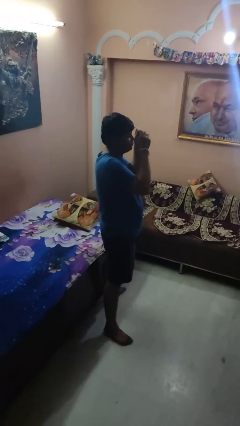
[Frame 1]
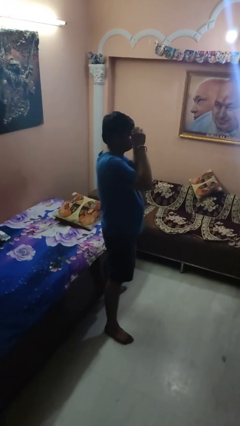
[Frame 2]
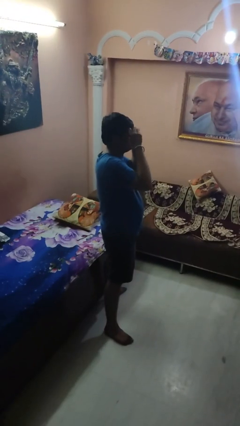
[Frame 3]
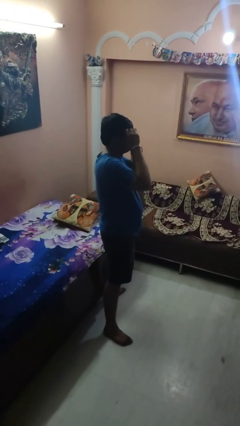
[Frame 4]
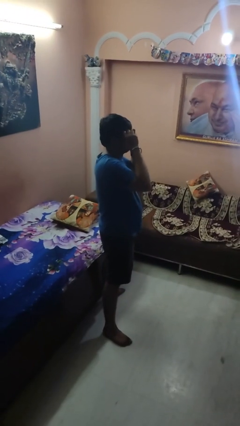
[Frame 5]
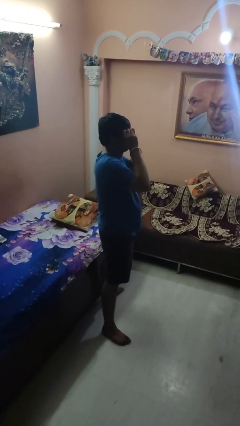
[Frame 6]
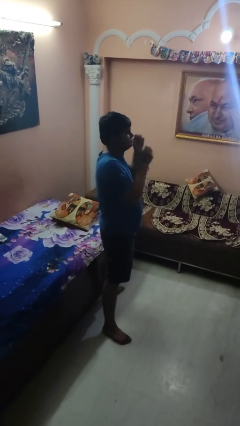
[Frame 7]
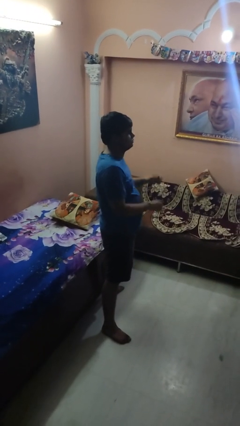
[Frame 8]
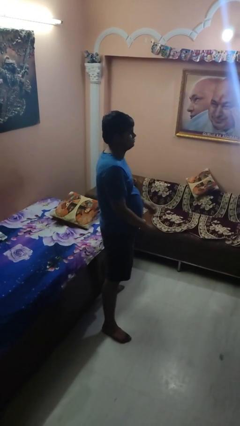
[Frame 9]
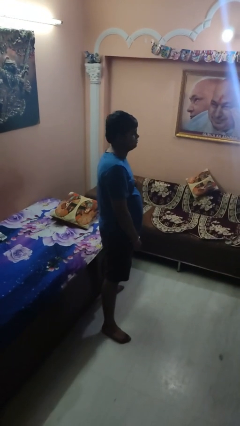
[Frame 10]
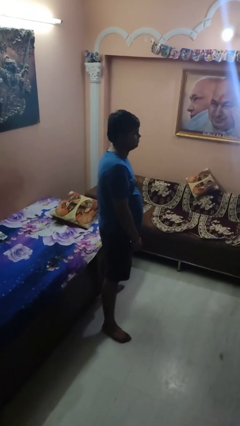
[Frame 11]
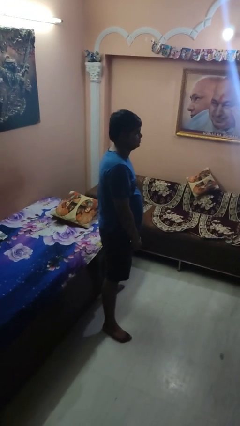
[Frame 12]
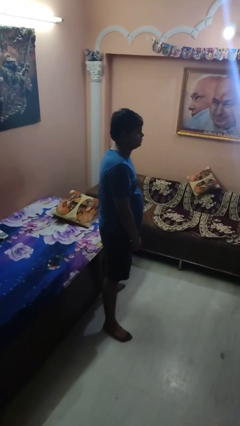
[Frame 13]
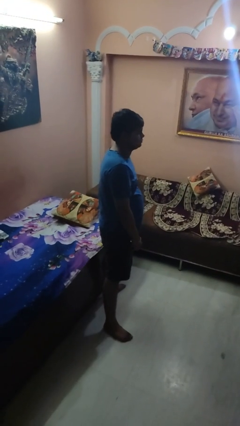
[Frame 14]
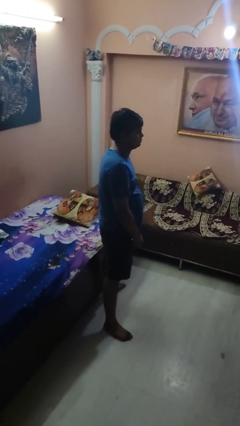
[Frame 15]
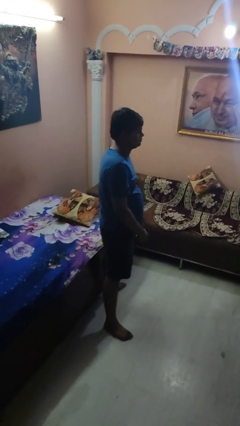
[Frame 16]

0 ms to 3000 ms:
person puts on glasses

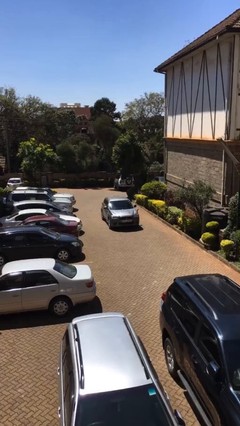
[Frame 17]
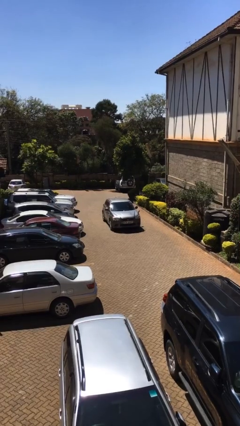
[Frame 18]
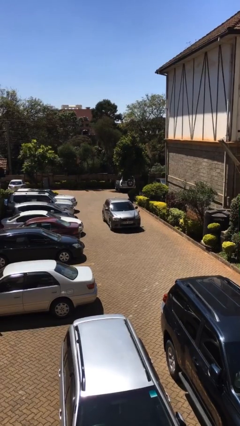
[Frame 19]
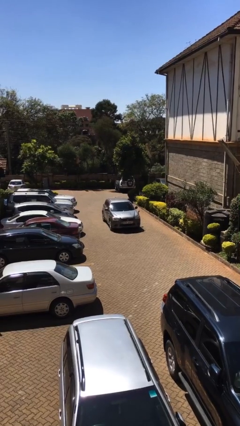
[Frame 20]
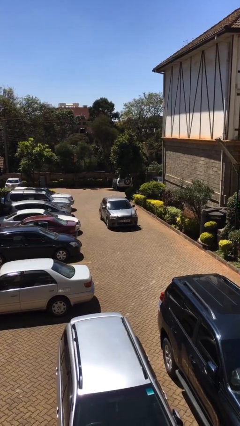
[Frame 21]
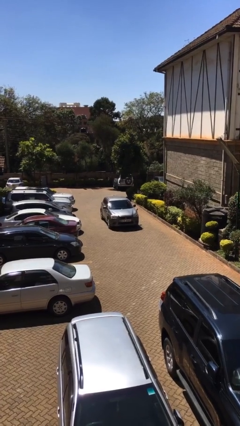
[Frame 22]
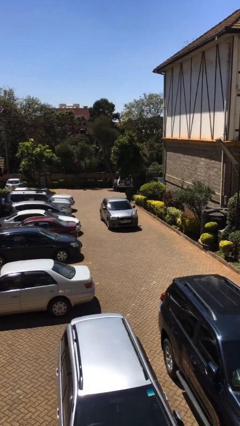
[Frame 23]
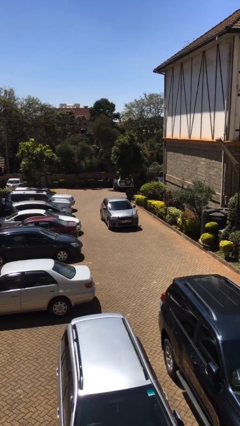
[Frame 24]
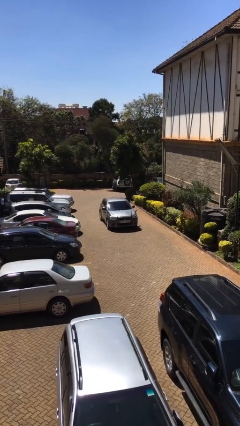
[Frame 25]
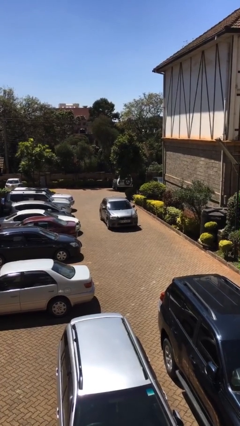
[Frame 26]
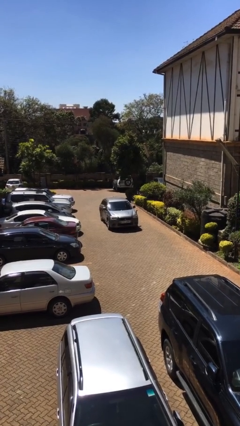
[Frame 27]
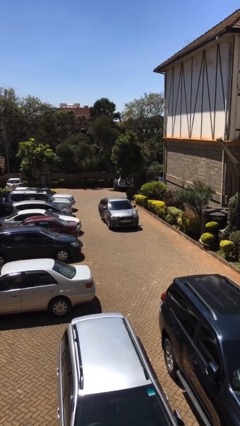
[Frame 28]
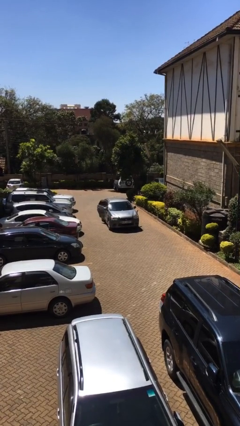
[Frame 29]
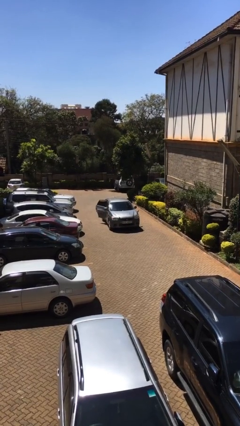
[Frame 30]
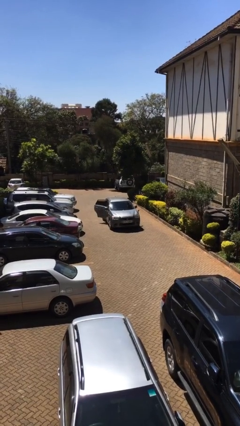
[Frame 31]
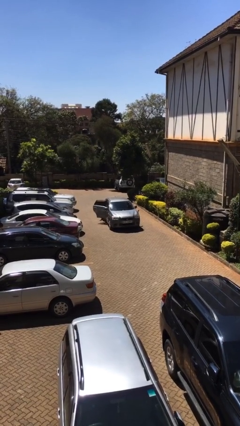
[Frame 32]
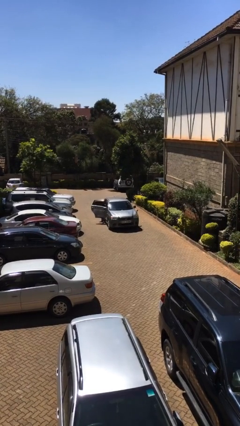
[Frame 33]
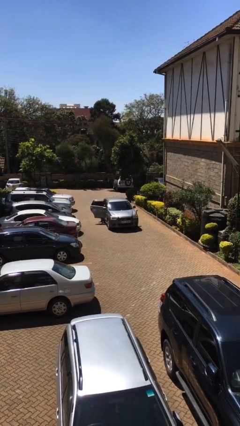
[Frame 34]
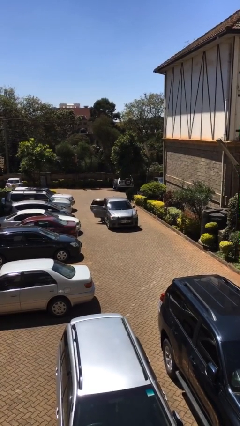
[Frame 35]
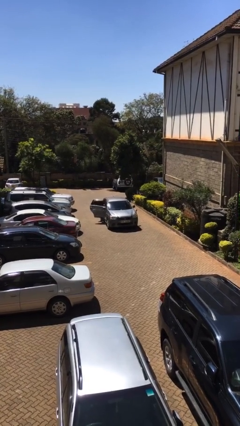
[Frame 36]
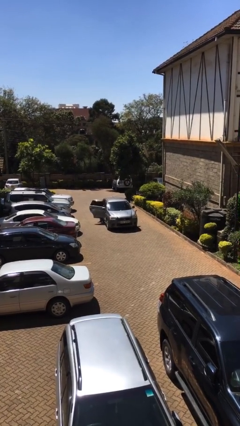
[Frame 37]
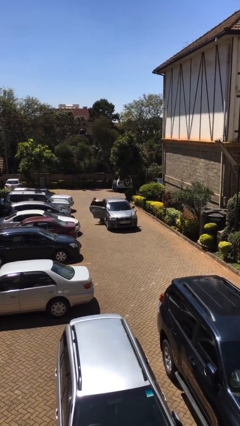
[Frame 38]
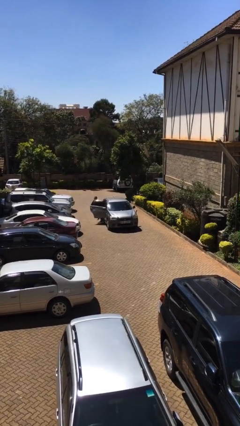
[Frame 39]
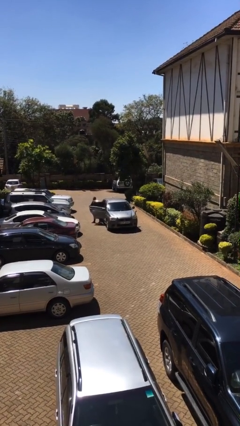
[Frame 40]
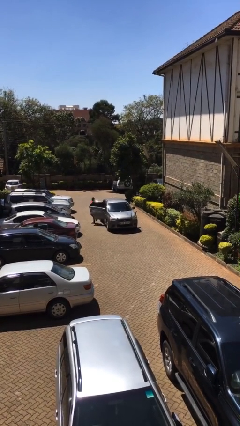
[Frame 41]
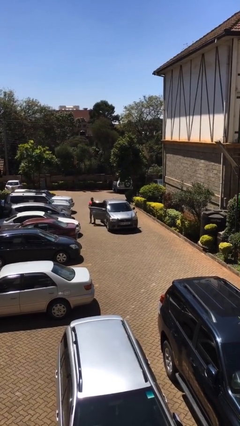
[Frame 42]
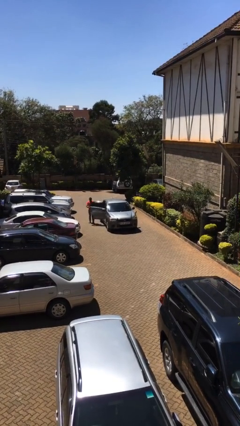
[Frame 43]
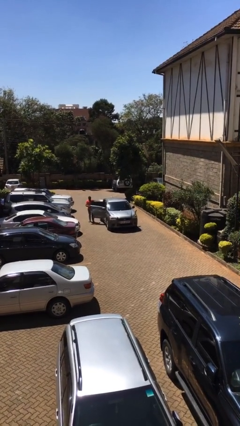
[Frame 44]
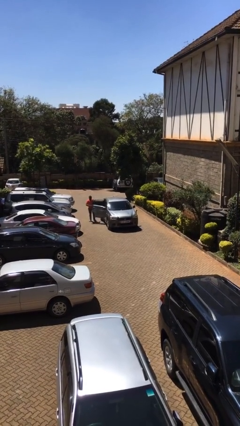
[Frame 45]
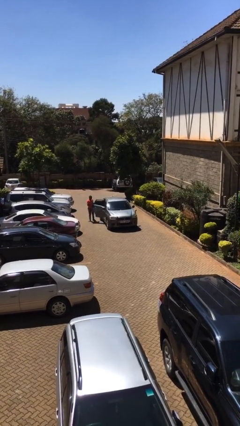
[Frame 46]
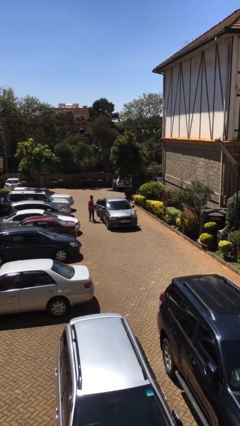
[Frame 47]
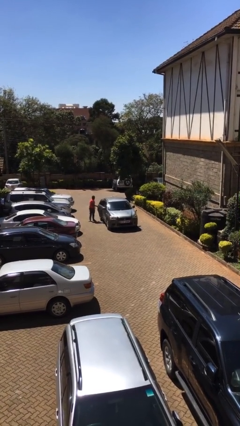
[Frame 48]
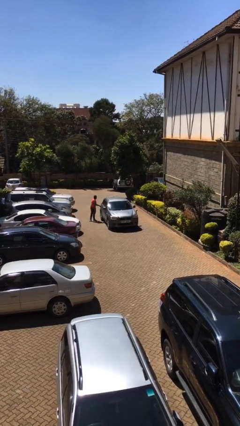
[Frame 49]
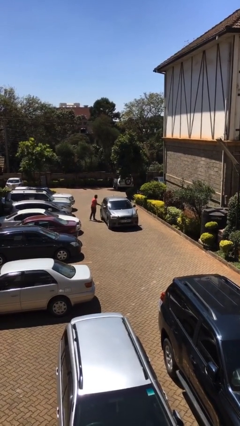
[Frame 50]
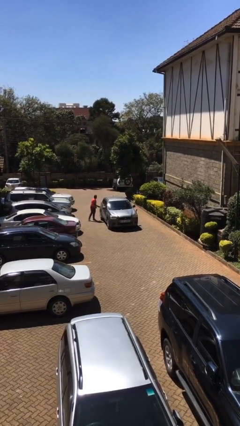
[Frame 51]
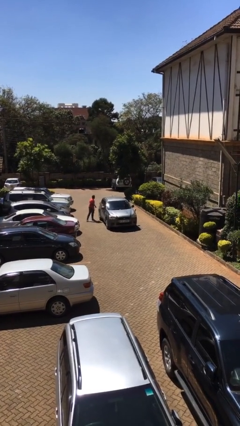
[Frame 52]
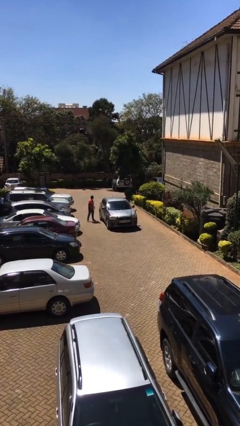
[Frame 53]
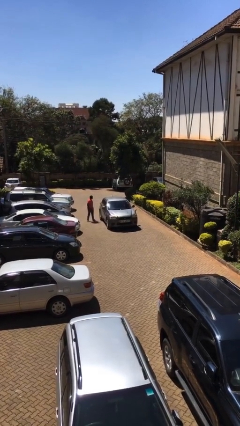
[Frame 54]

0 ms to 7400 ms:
car drops off person

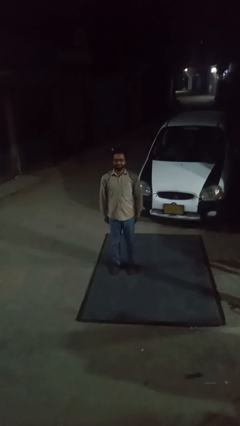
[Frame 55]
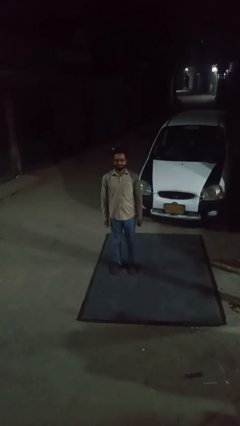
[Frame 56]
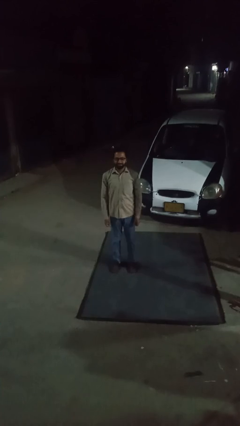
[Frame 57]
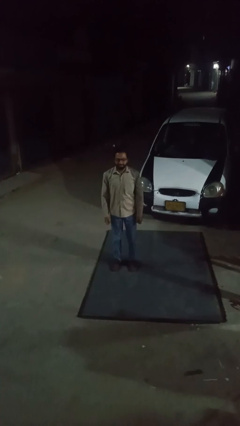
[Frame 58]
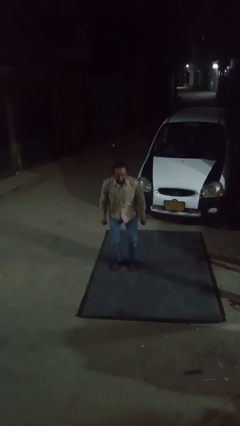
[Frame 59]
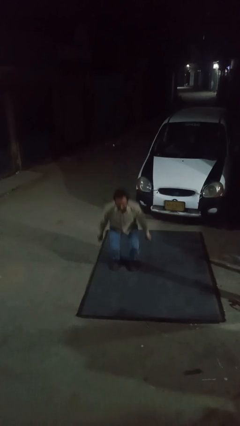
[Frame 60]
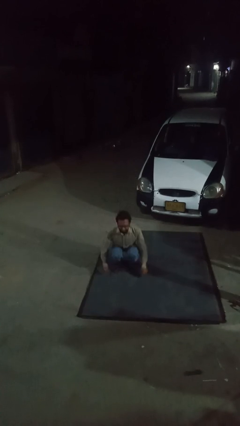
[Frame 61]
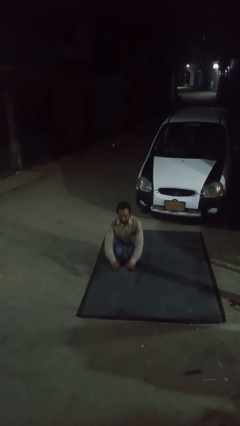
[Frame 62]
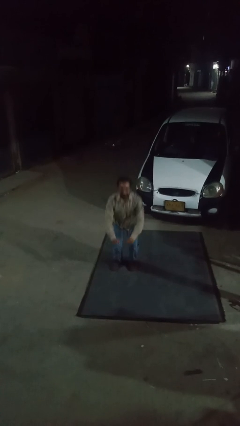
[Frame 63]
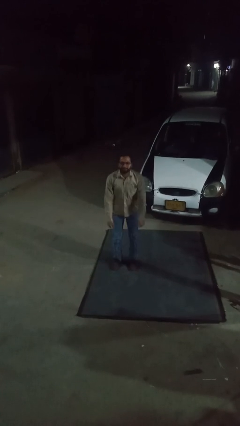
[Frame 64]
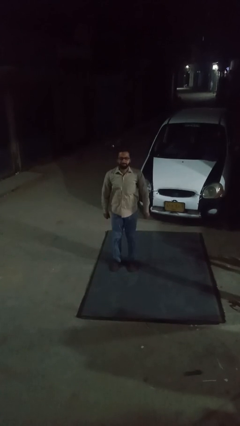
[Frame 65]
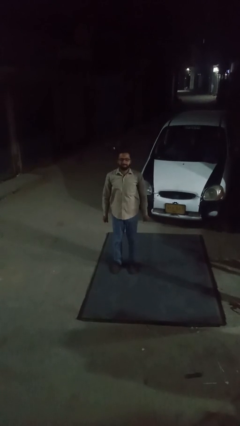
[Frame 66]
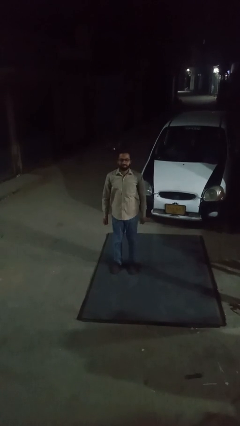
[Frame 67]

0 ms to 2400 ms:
person exercises with situp

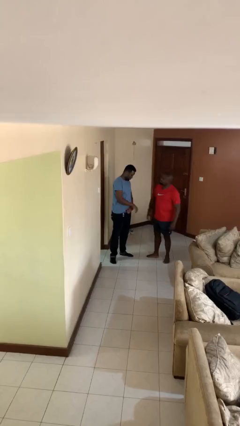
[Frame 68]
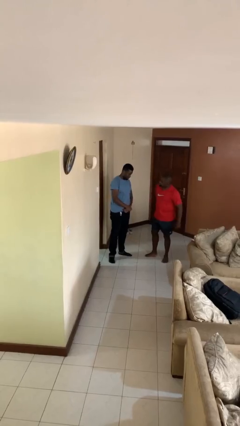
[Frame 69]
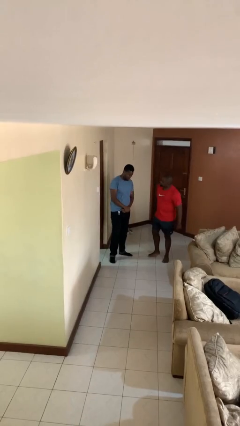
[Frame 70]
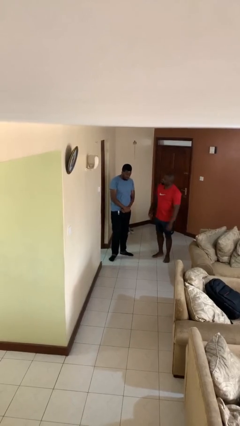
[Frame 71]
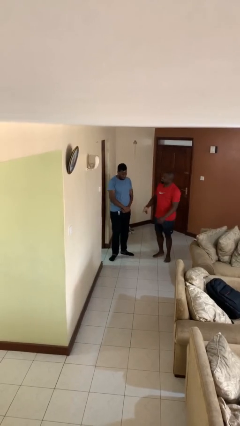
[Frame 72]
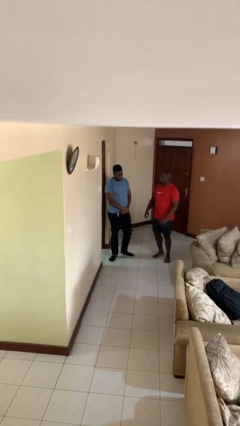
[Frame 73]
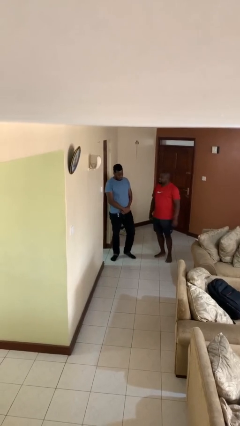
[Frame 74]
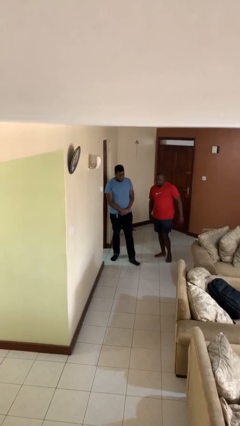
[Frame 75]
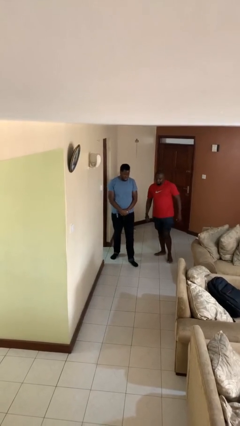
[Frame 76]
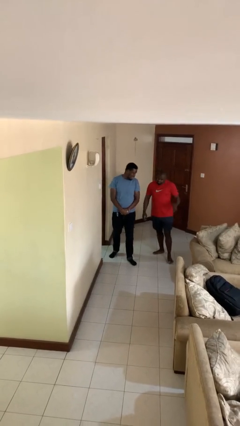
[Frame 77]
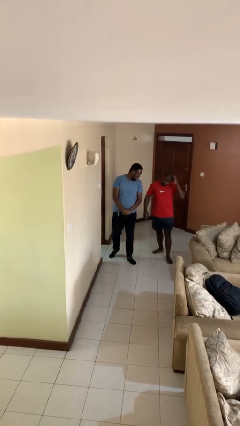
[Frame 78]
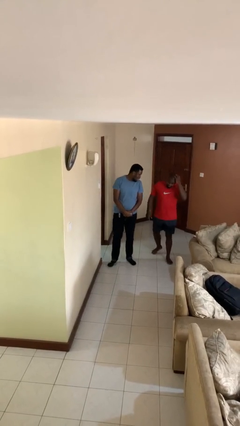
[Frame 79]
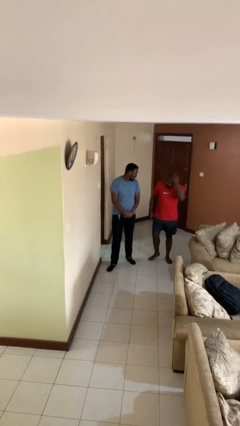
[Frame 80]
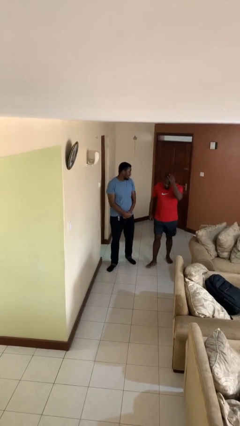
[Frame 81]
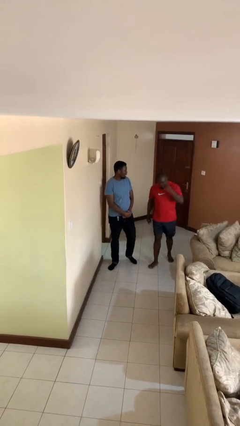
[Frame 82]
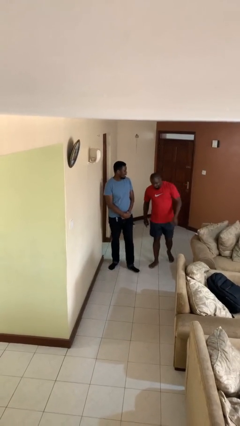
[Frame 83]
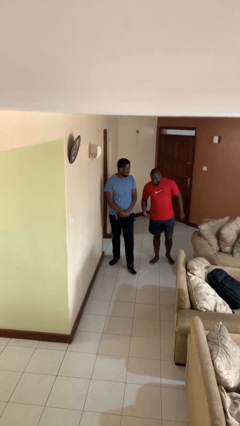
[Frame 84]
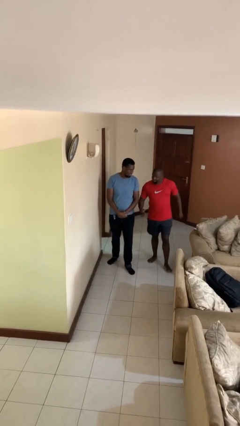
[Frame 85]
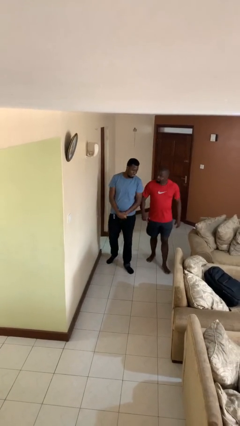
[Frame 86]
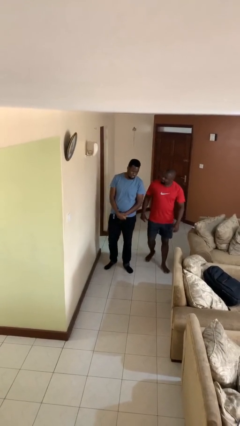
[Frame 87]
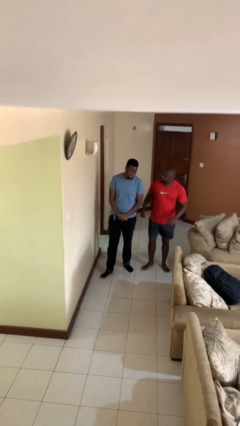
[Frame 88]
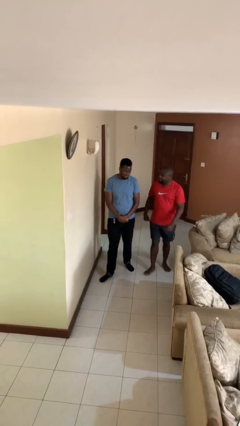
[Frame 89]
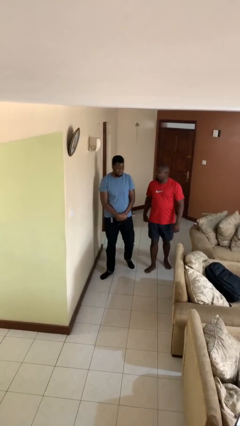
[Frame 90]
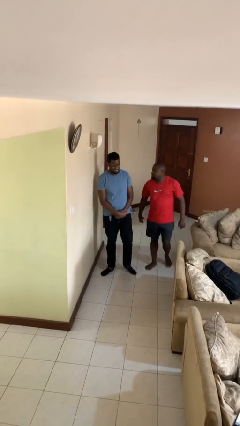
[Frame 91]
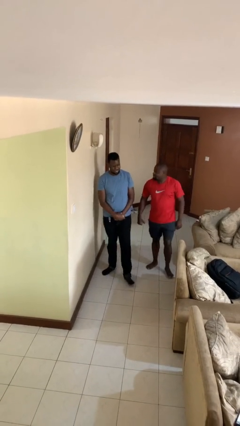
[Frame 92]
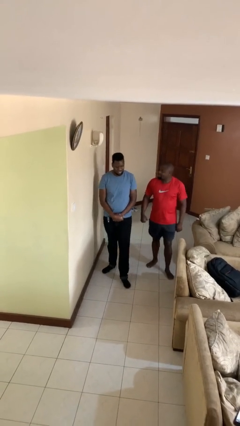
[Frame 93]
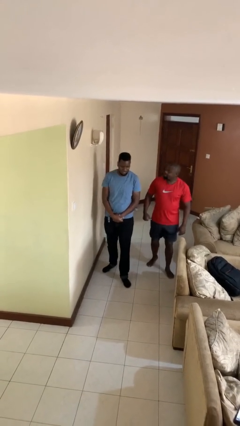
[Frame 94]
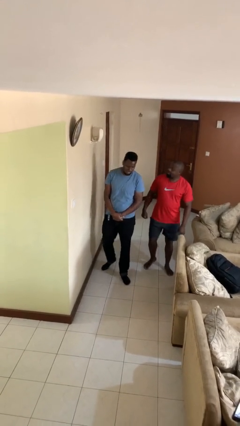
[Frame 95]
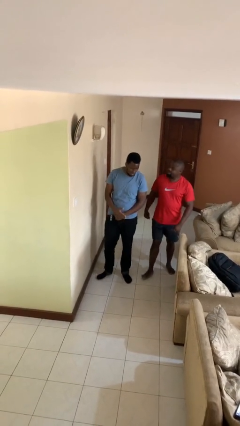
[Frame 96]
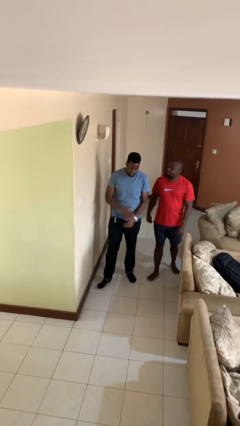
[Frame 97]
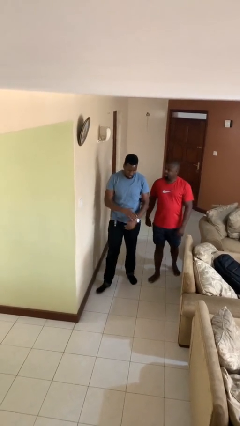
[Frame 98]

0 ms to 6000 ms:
person talks to person
